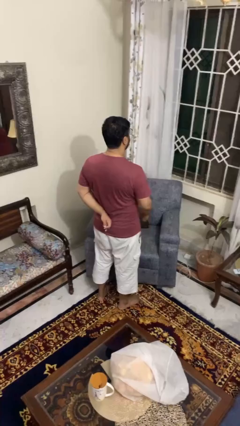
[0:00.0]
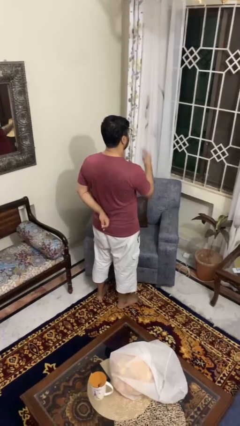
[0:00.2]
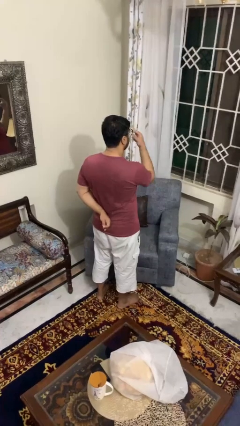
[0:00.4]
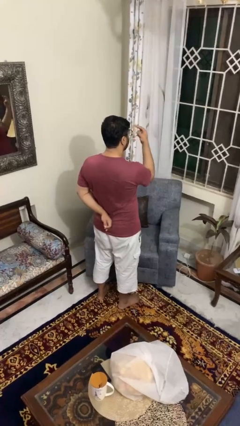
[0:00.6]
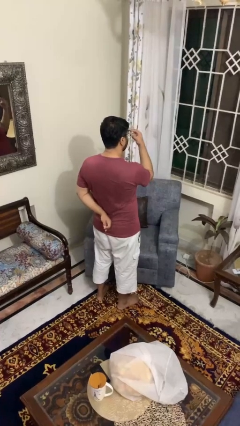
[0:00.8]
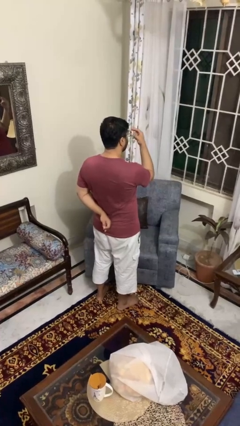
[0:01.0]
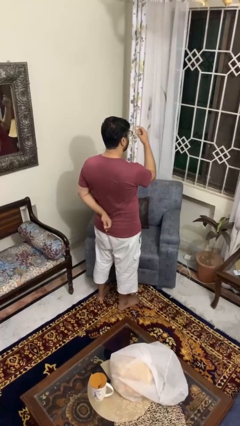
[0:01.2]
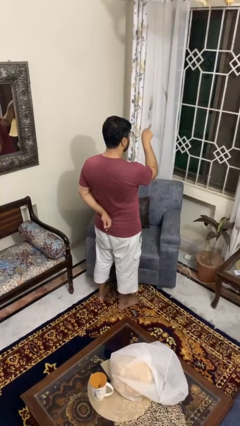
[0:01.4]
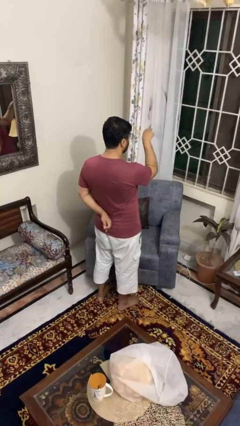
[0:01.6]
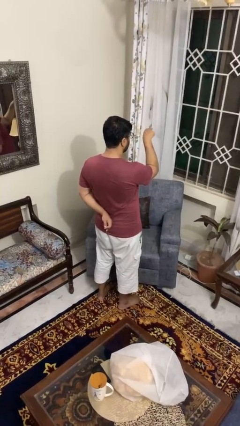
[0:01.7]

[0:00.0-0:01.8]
person gestures watch closely

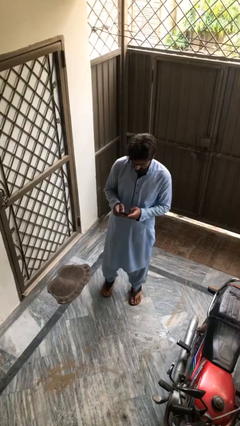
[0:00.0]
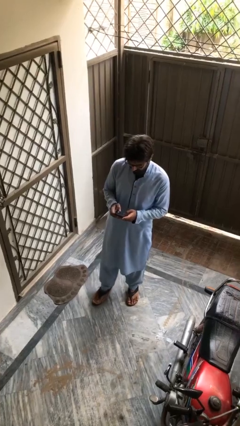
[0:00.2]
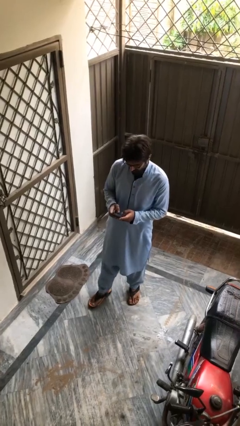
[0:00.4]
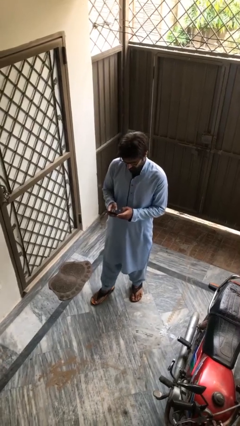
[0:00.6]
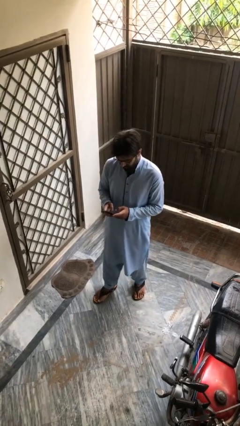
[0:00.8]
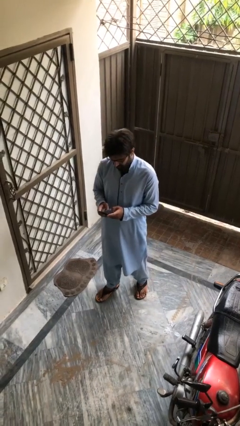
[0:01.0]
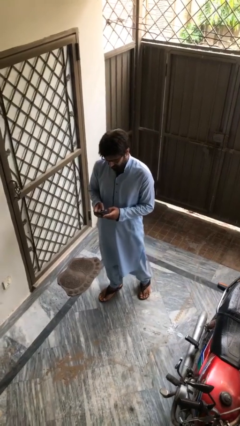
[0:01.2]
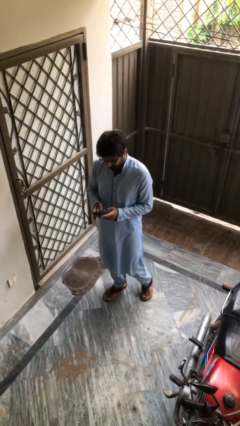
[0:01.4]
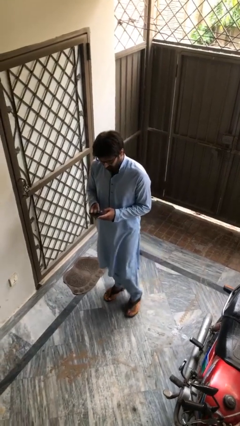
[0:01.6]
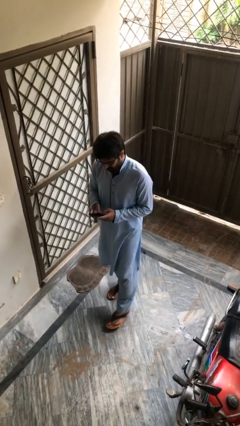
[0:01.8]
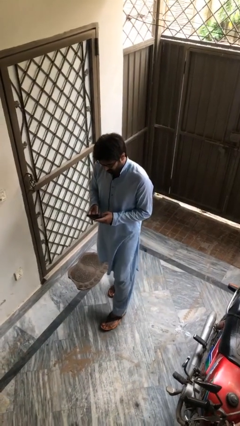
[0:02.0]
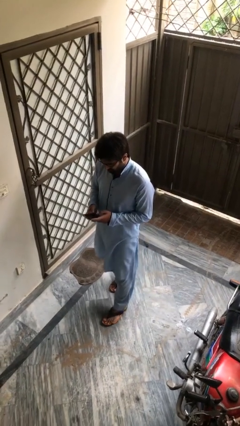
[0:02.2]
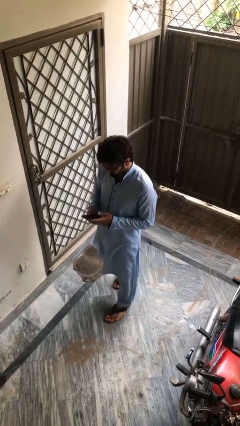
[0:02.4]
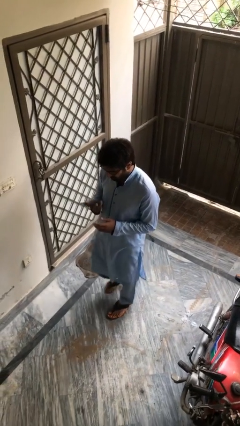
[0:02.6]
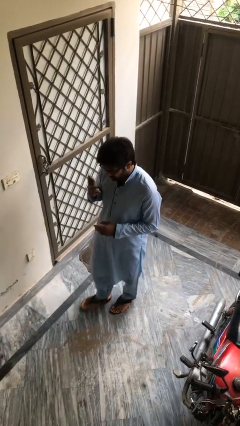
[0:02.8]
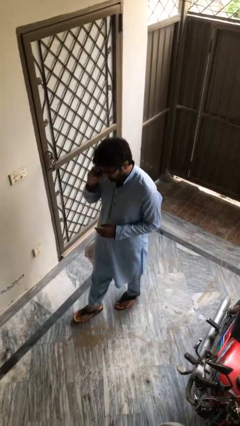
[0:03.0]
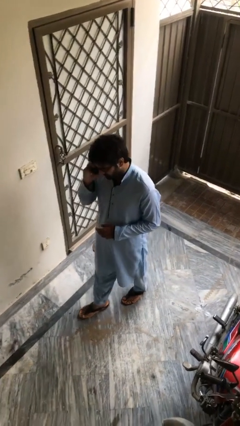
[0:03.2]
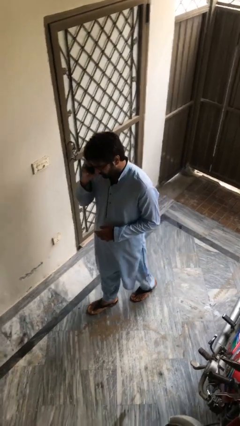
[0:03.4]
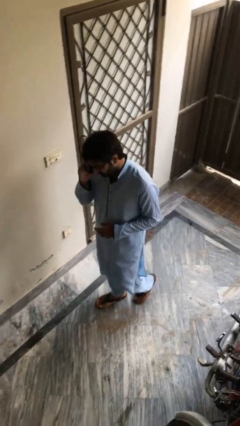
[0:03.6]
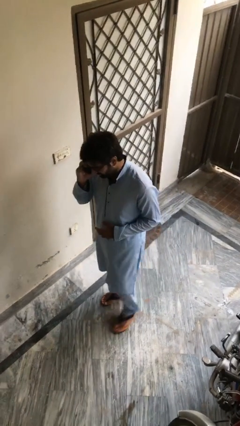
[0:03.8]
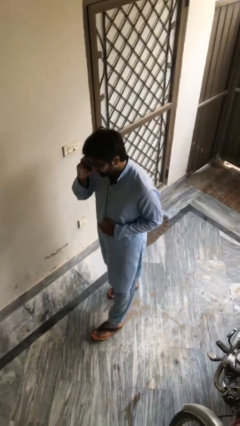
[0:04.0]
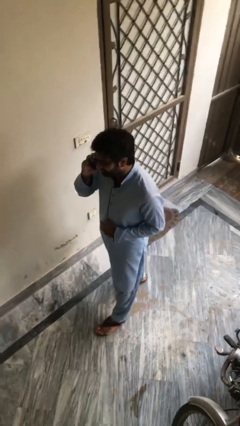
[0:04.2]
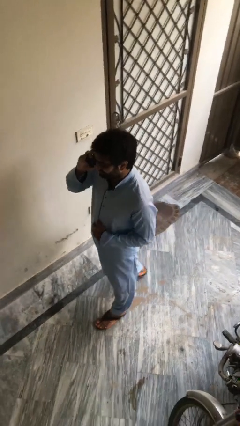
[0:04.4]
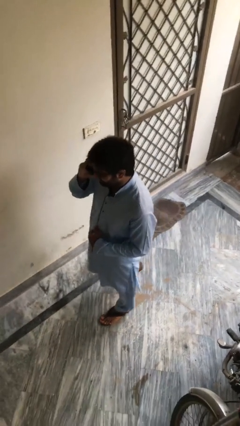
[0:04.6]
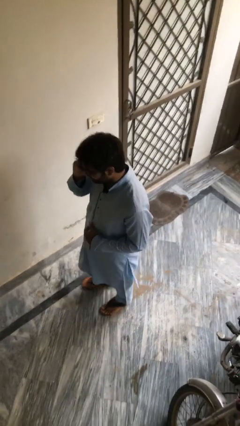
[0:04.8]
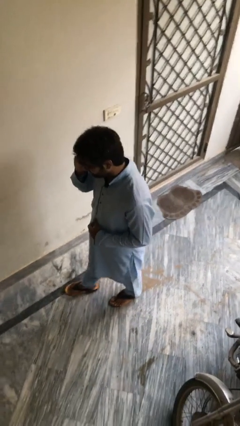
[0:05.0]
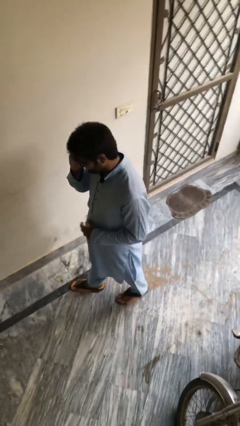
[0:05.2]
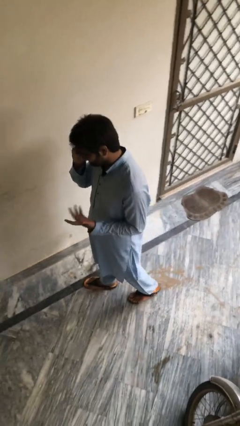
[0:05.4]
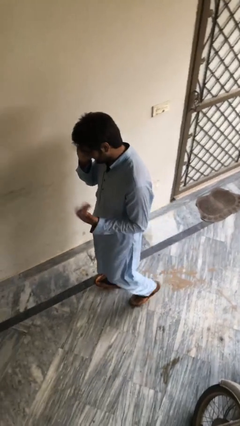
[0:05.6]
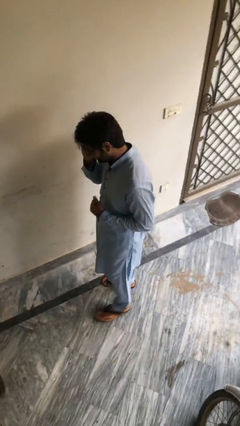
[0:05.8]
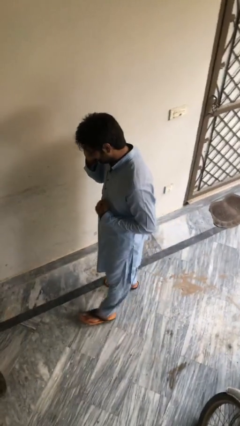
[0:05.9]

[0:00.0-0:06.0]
person talks on phone

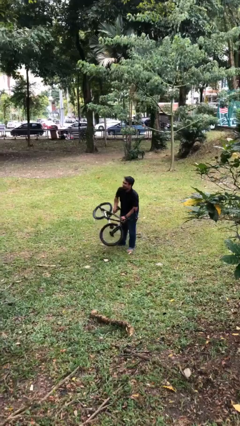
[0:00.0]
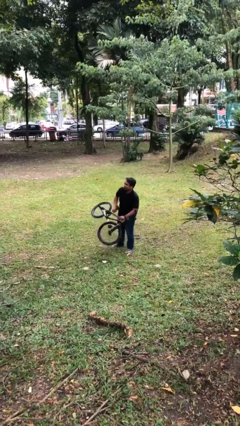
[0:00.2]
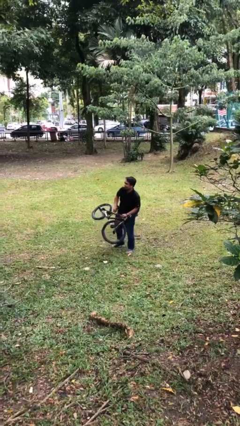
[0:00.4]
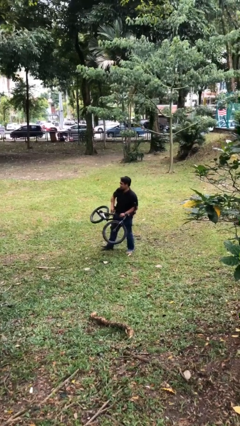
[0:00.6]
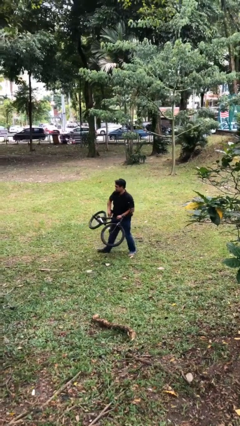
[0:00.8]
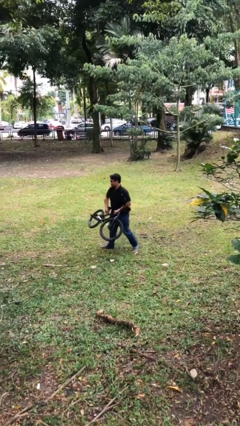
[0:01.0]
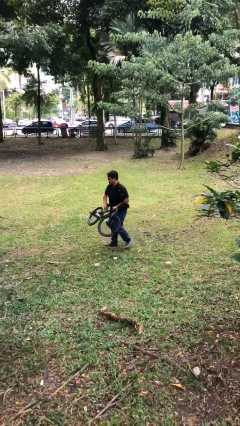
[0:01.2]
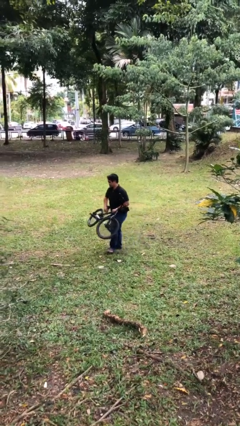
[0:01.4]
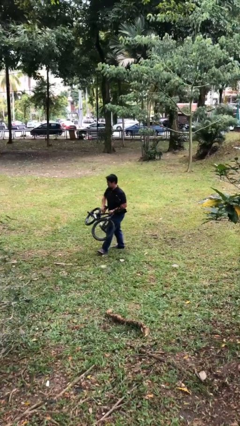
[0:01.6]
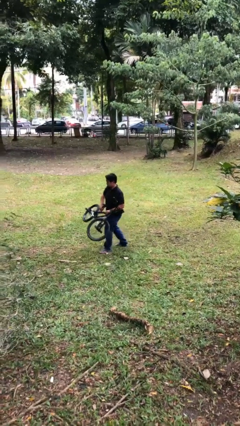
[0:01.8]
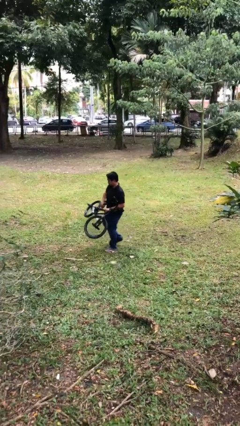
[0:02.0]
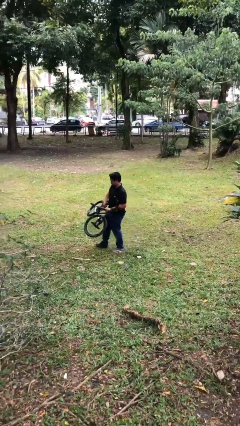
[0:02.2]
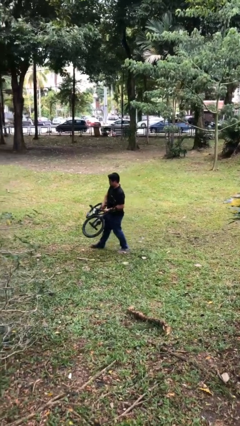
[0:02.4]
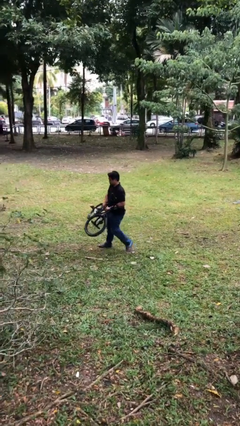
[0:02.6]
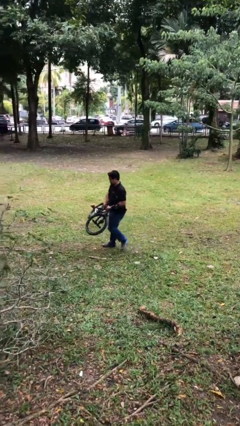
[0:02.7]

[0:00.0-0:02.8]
person carries heavy object

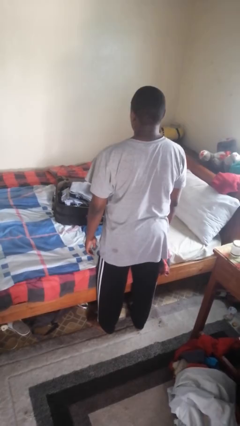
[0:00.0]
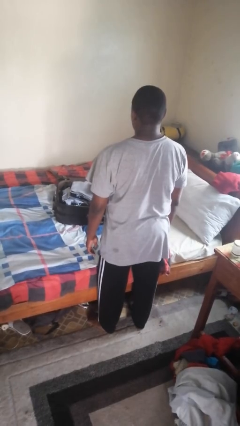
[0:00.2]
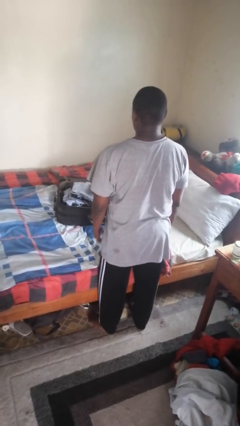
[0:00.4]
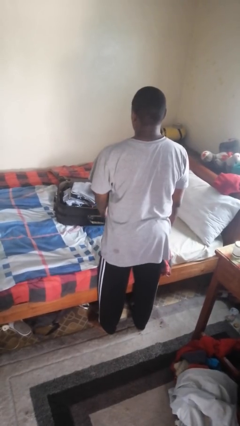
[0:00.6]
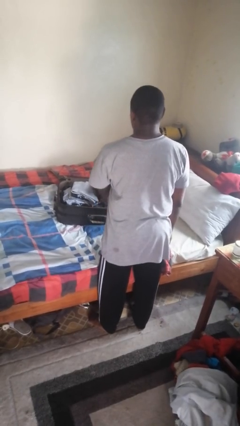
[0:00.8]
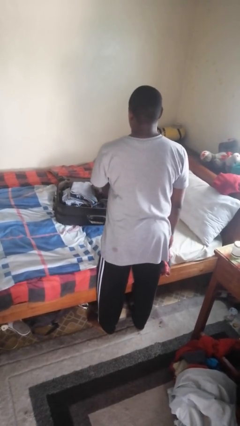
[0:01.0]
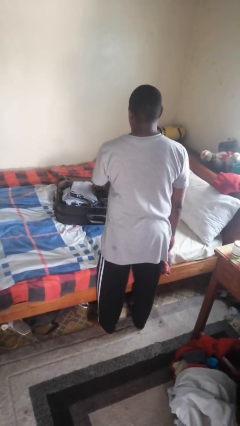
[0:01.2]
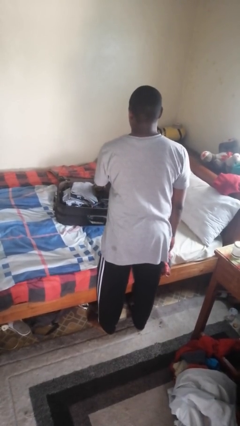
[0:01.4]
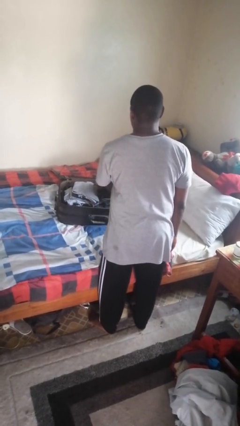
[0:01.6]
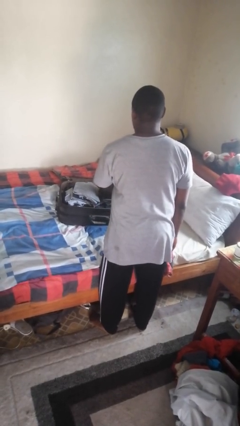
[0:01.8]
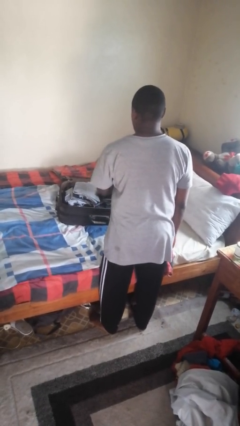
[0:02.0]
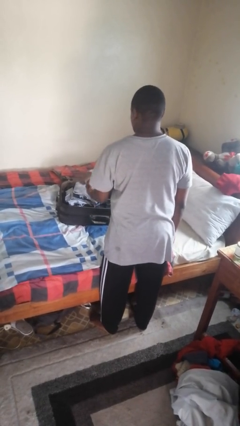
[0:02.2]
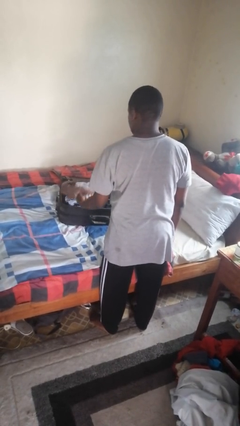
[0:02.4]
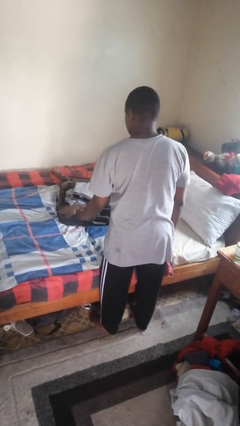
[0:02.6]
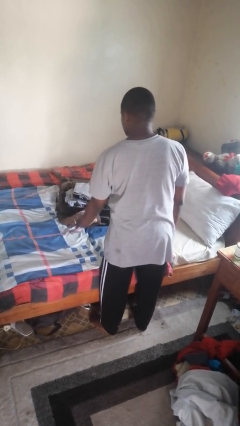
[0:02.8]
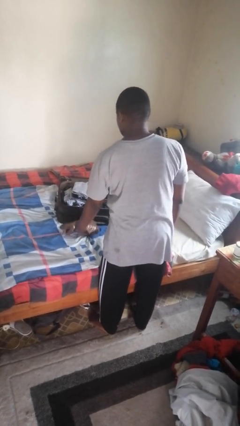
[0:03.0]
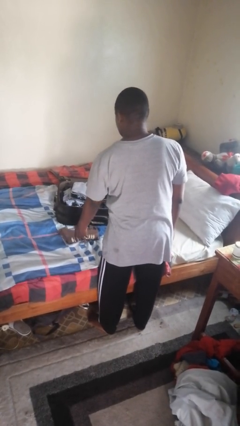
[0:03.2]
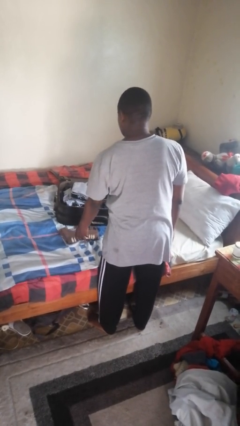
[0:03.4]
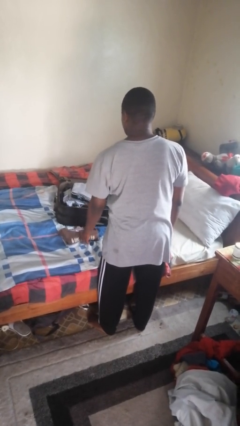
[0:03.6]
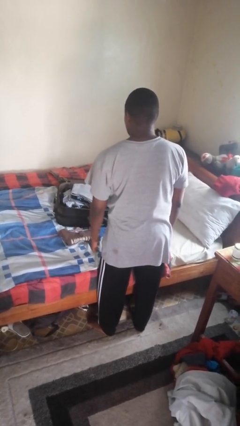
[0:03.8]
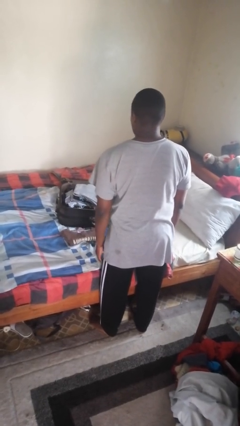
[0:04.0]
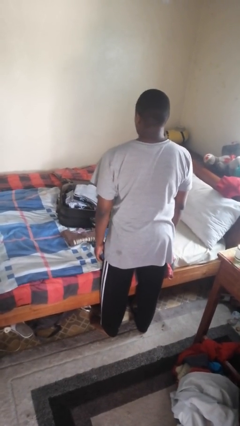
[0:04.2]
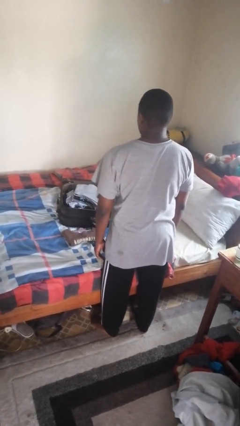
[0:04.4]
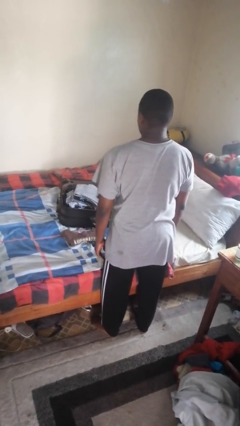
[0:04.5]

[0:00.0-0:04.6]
person unloads clothes from suitcase

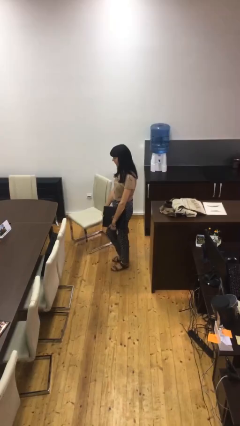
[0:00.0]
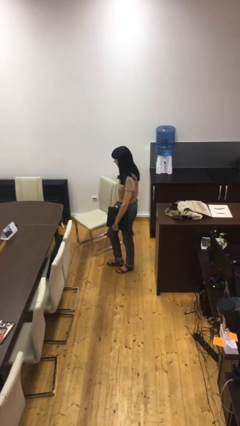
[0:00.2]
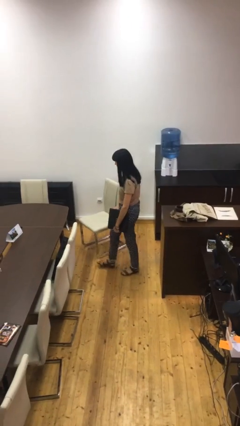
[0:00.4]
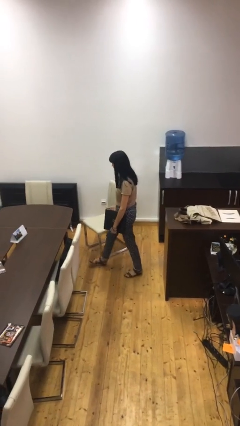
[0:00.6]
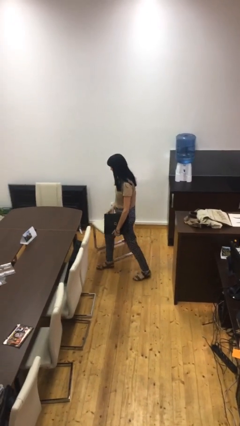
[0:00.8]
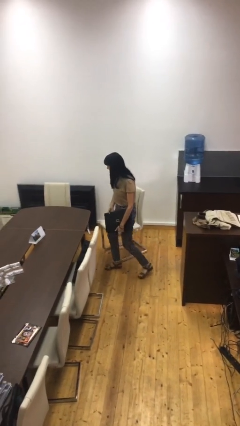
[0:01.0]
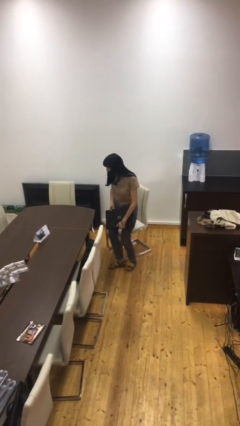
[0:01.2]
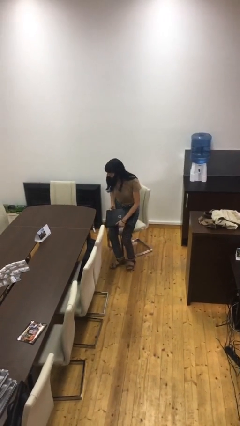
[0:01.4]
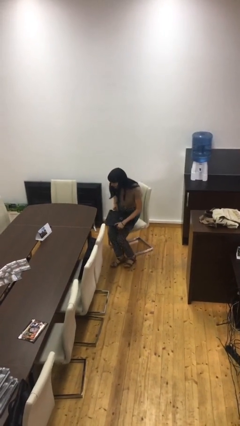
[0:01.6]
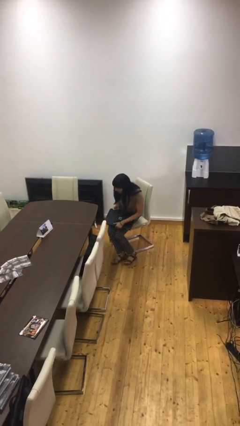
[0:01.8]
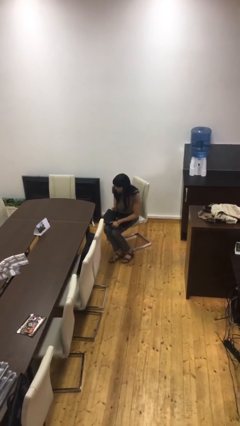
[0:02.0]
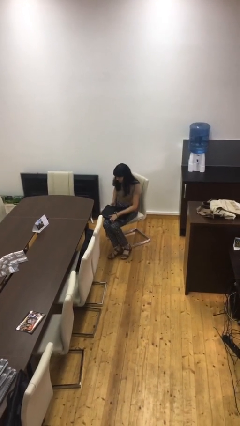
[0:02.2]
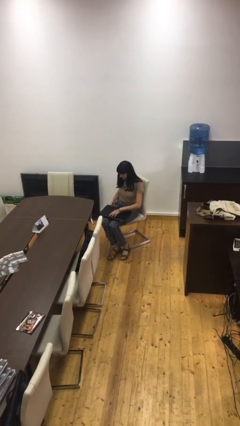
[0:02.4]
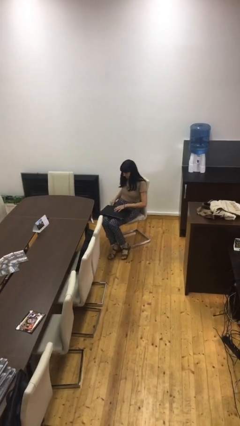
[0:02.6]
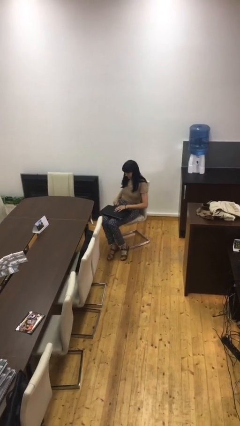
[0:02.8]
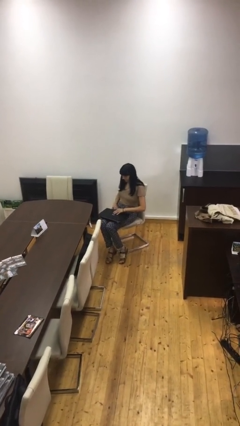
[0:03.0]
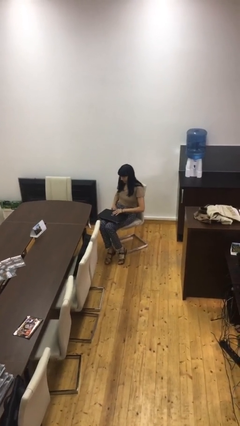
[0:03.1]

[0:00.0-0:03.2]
person sits down
